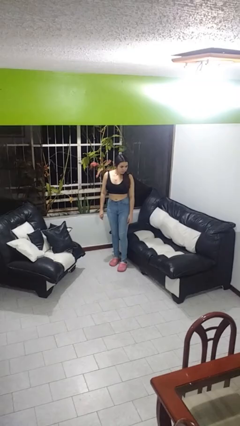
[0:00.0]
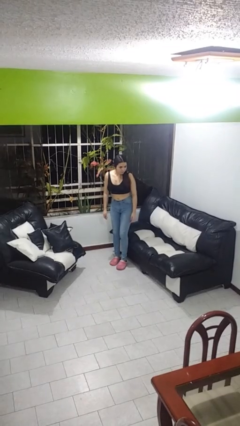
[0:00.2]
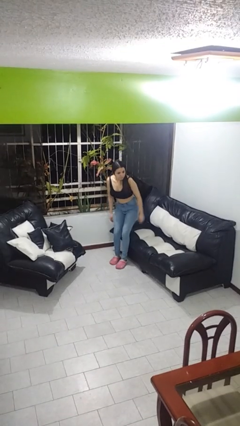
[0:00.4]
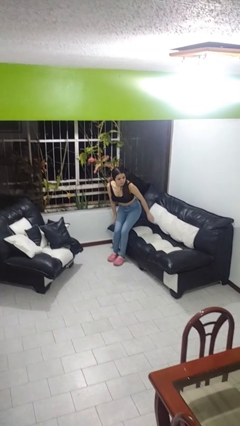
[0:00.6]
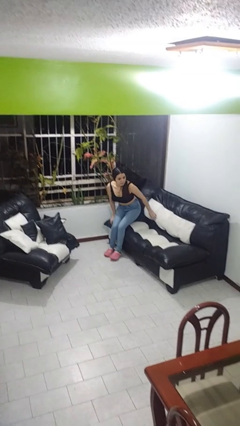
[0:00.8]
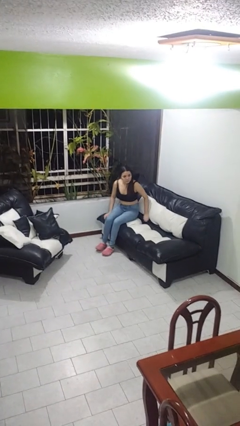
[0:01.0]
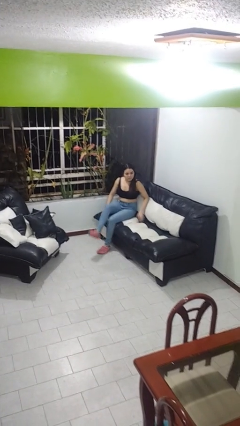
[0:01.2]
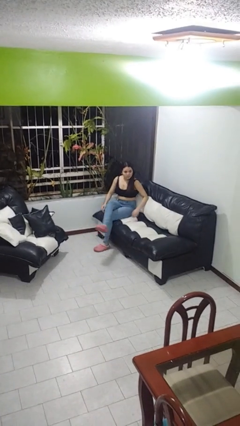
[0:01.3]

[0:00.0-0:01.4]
person lies down on couch

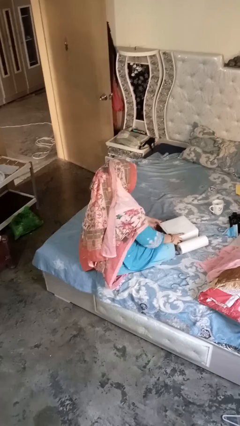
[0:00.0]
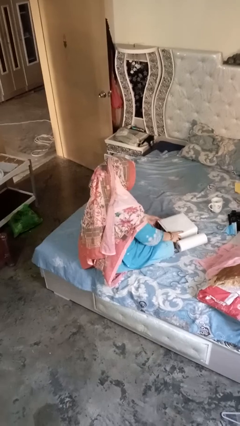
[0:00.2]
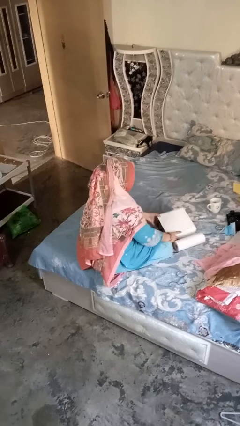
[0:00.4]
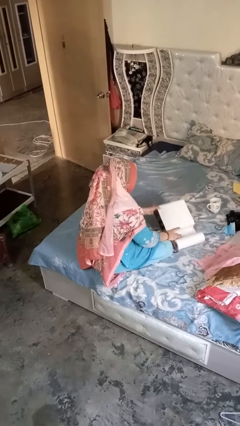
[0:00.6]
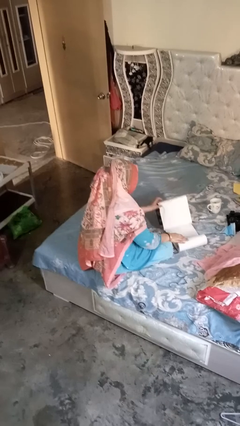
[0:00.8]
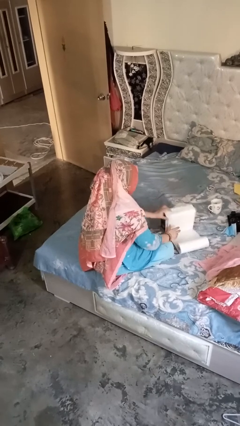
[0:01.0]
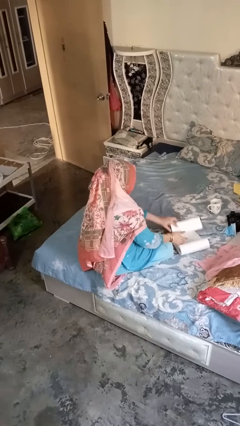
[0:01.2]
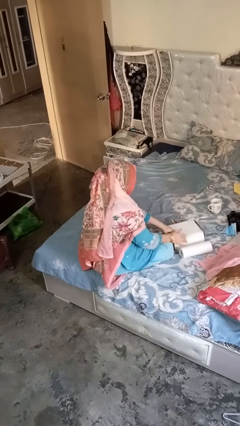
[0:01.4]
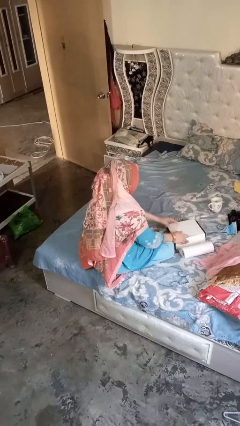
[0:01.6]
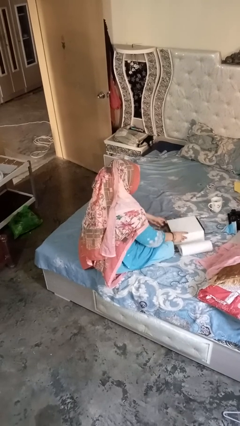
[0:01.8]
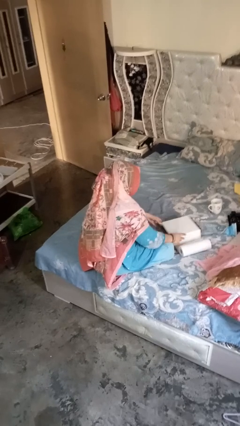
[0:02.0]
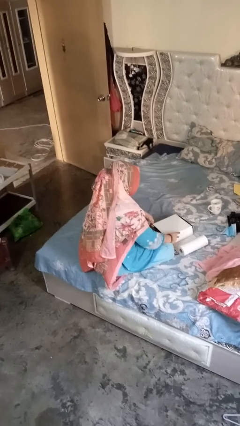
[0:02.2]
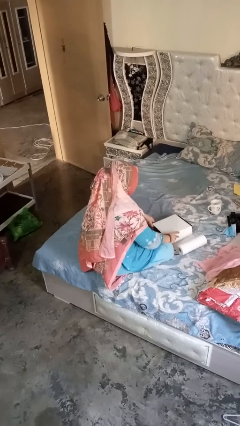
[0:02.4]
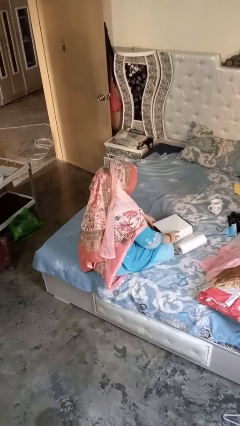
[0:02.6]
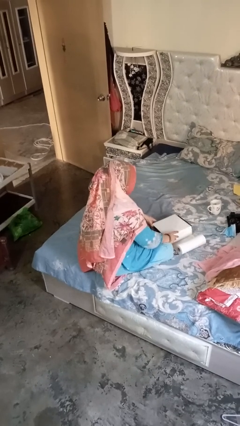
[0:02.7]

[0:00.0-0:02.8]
person wraps box

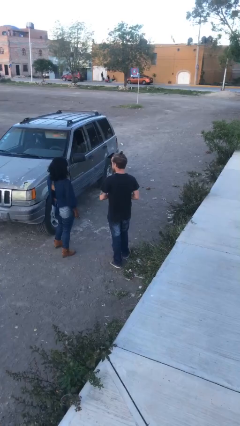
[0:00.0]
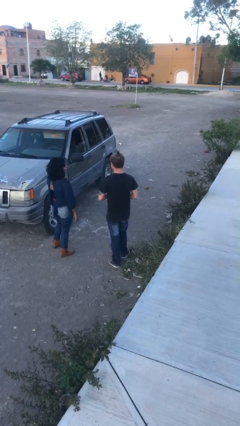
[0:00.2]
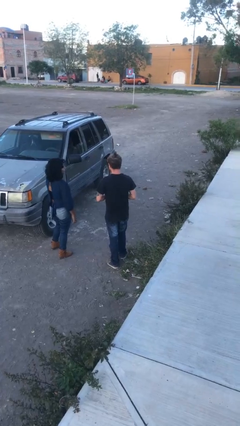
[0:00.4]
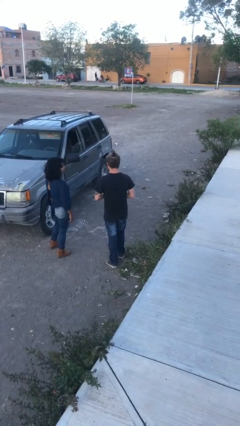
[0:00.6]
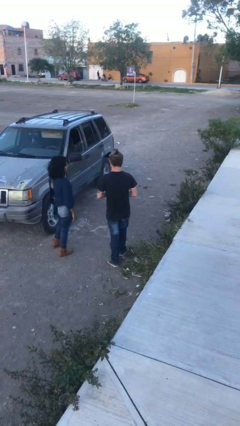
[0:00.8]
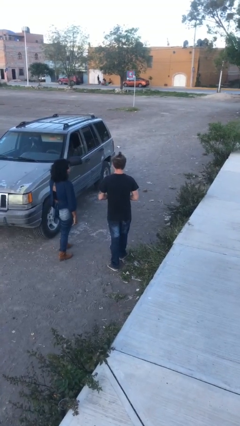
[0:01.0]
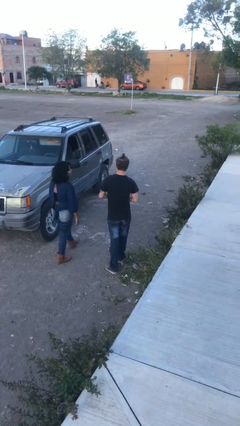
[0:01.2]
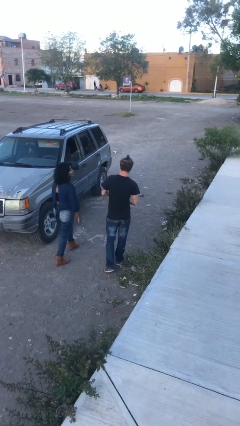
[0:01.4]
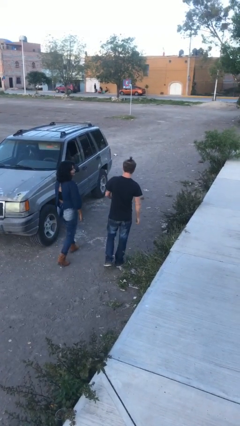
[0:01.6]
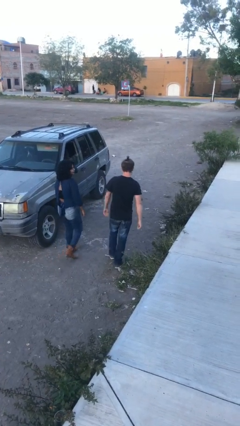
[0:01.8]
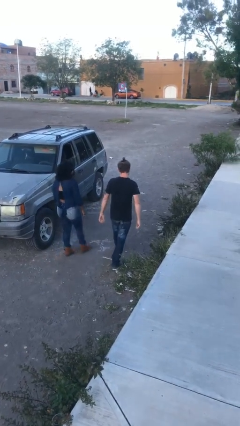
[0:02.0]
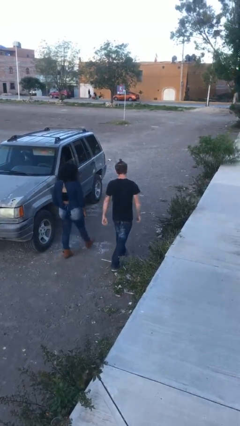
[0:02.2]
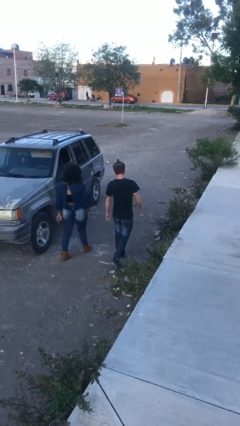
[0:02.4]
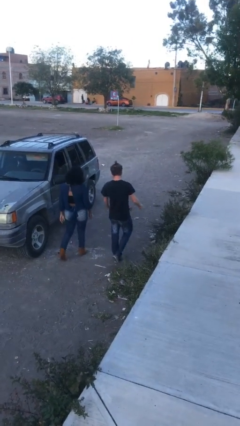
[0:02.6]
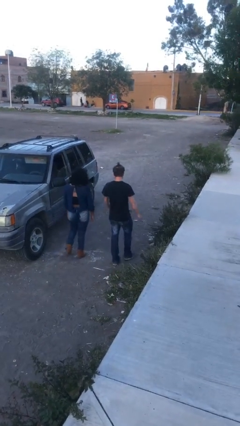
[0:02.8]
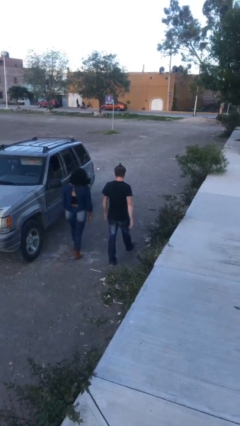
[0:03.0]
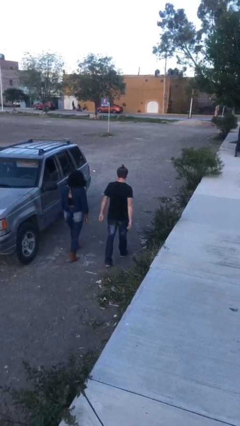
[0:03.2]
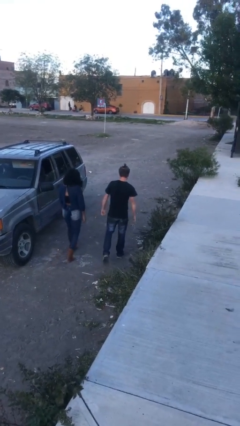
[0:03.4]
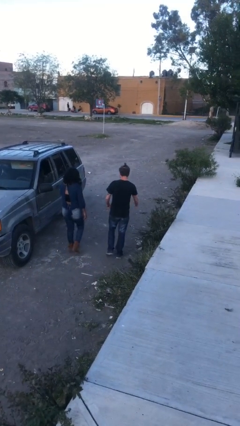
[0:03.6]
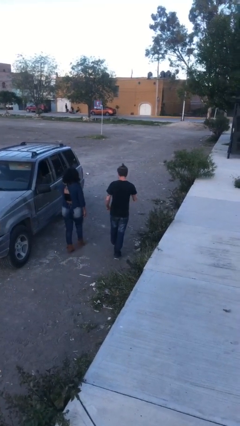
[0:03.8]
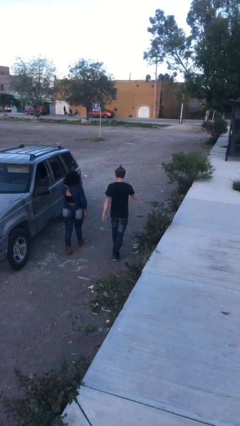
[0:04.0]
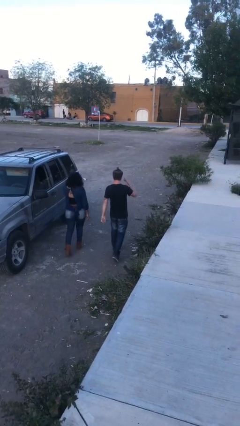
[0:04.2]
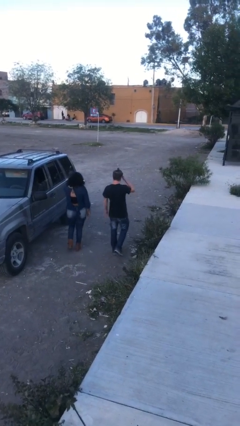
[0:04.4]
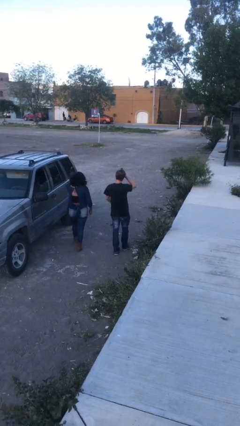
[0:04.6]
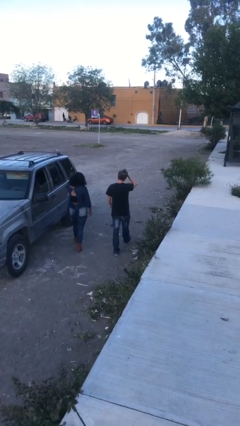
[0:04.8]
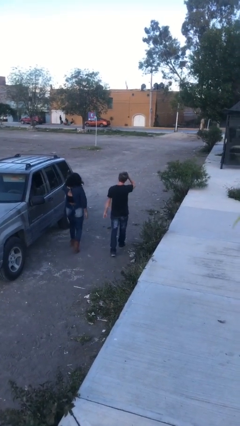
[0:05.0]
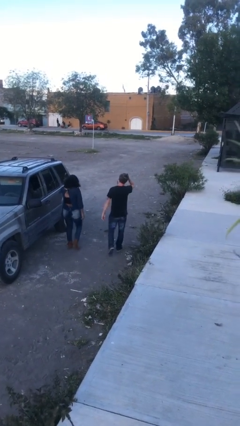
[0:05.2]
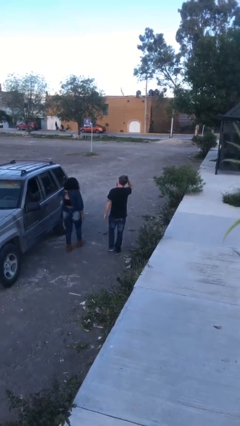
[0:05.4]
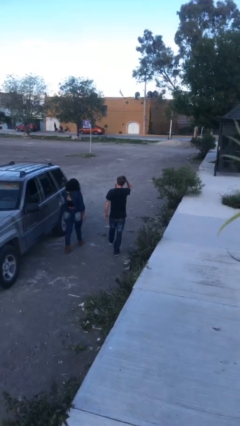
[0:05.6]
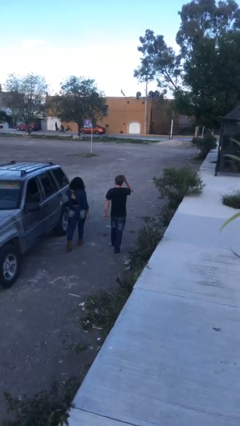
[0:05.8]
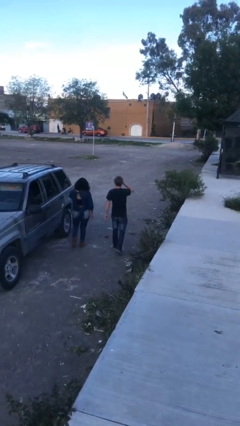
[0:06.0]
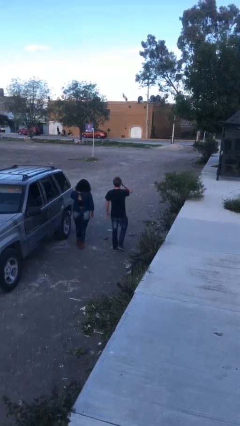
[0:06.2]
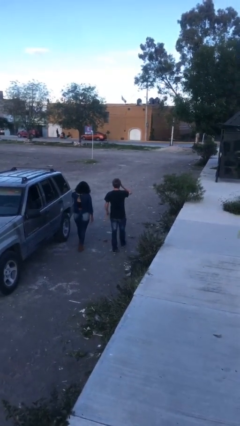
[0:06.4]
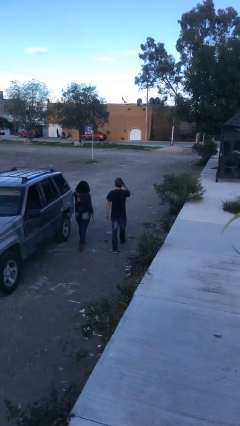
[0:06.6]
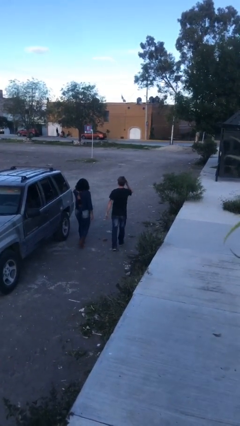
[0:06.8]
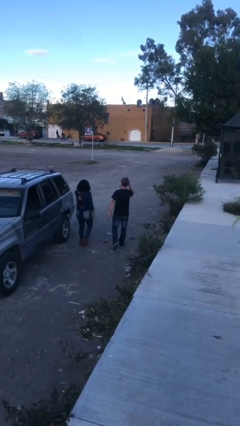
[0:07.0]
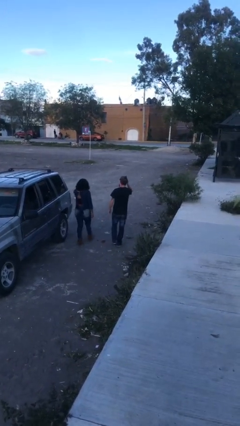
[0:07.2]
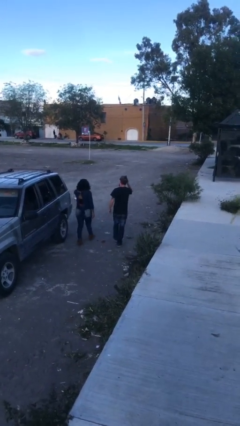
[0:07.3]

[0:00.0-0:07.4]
person talks to person

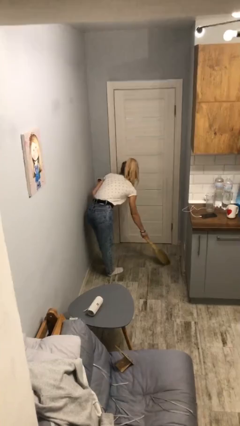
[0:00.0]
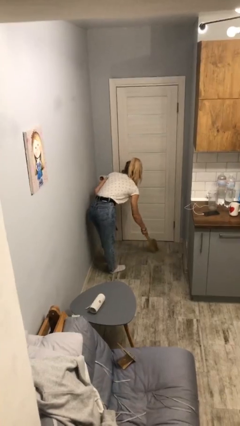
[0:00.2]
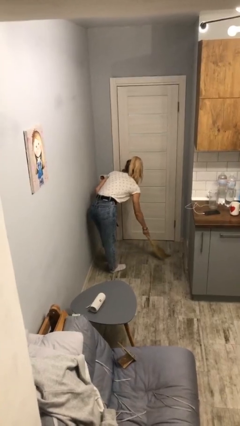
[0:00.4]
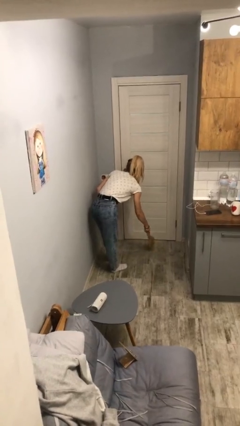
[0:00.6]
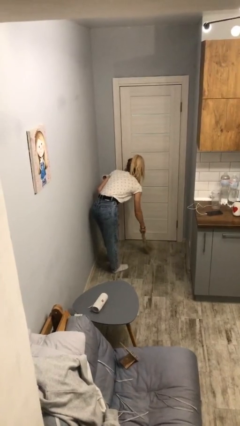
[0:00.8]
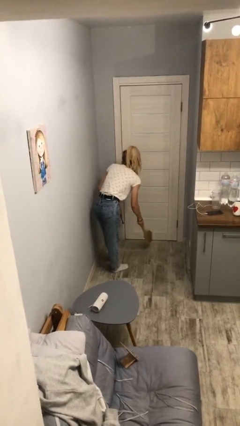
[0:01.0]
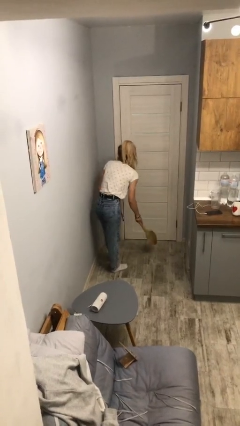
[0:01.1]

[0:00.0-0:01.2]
person sweeps floor

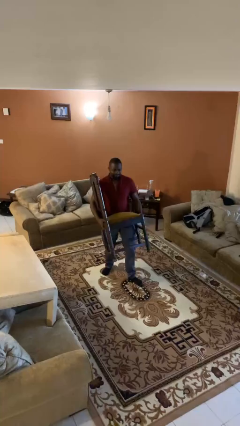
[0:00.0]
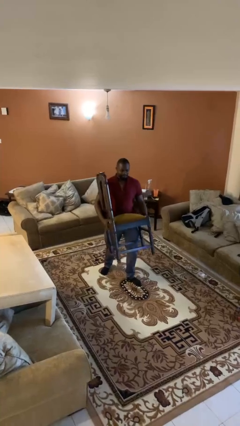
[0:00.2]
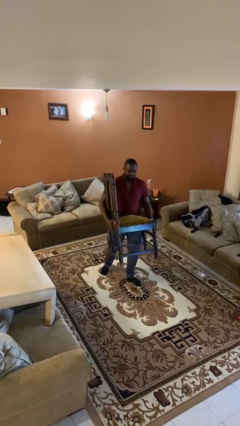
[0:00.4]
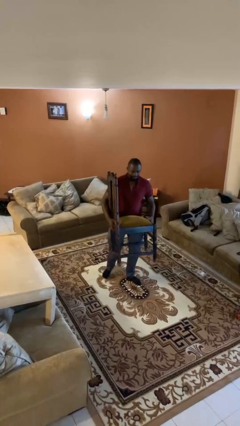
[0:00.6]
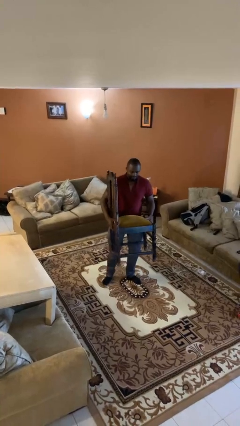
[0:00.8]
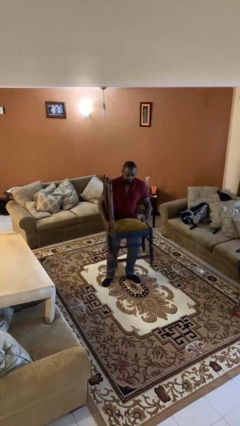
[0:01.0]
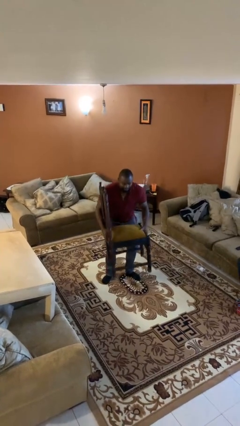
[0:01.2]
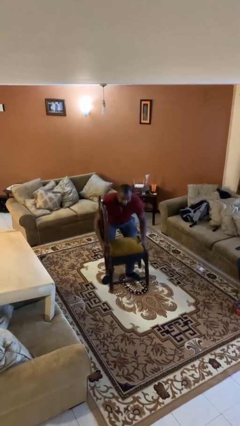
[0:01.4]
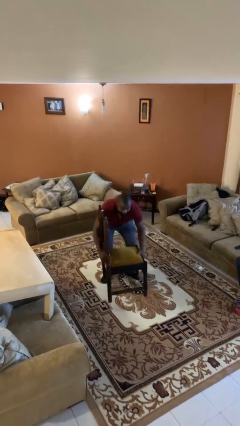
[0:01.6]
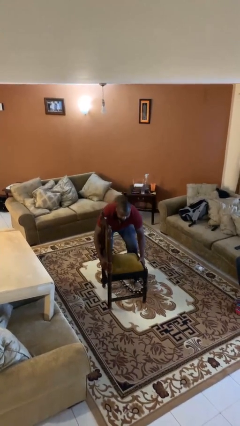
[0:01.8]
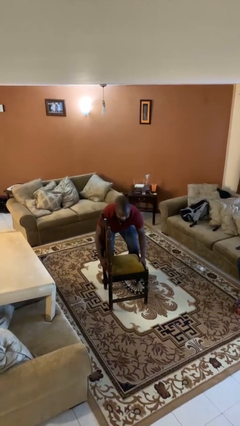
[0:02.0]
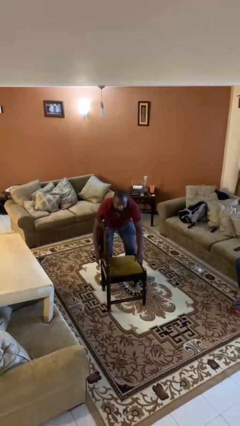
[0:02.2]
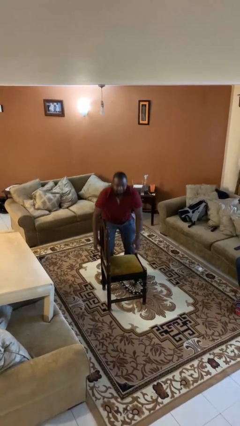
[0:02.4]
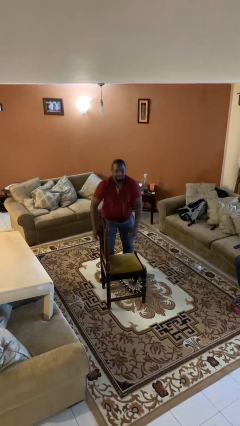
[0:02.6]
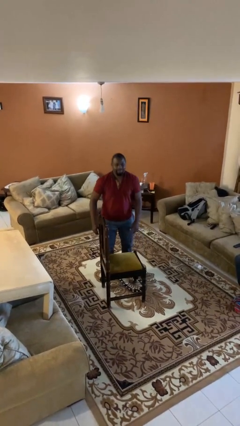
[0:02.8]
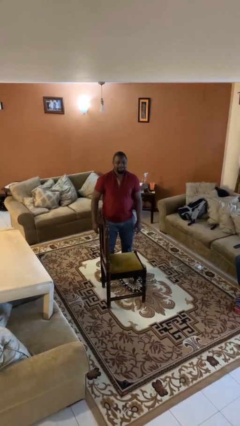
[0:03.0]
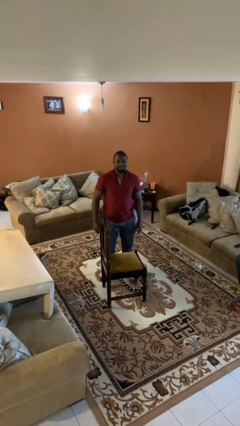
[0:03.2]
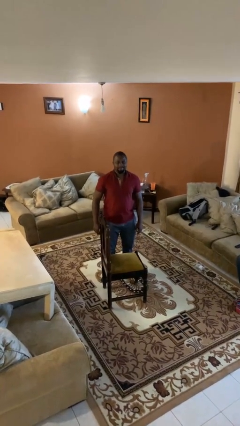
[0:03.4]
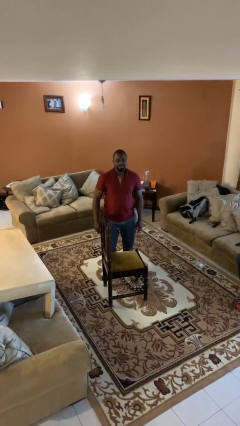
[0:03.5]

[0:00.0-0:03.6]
person puts down object on floor

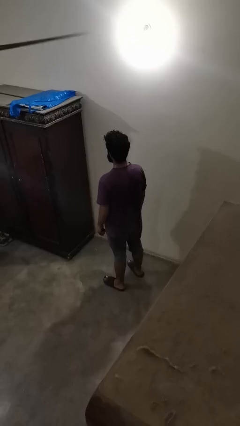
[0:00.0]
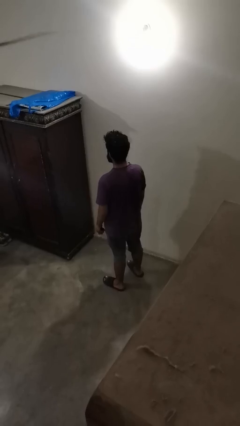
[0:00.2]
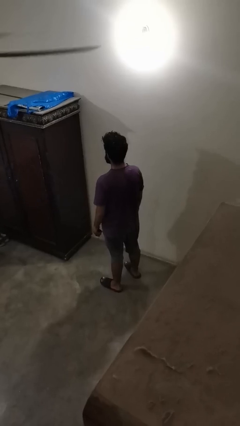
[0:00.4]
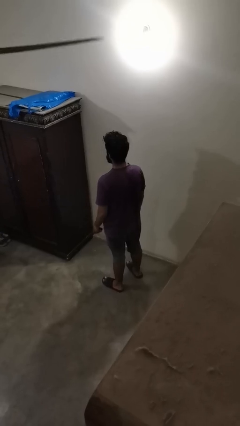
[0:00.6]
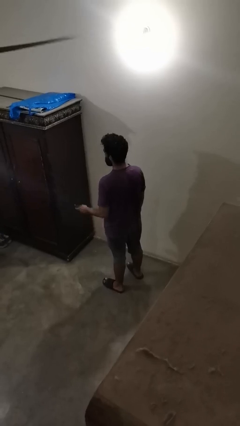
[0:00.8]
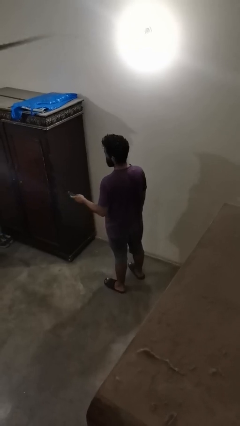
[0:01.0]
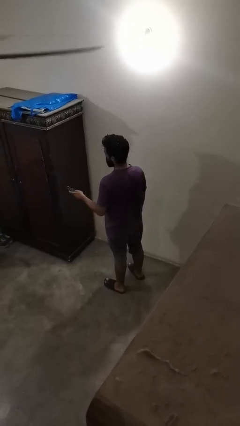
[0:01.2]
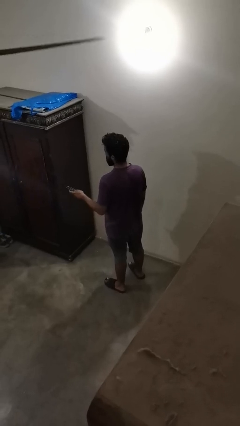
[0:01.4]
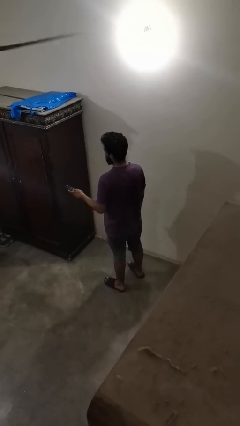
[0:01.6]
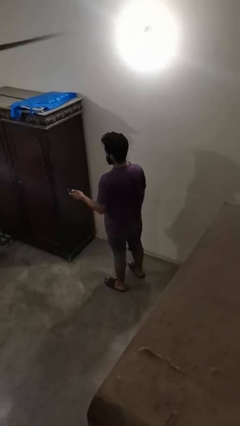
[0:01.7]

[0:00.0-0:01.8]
person uses television remote
